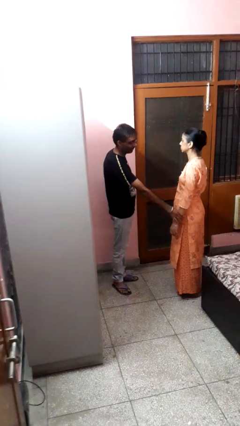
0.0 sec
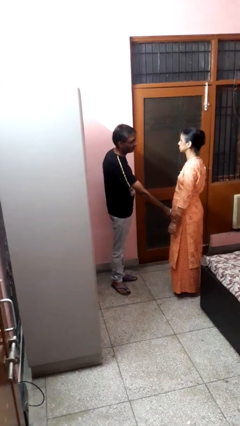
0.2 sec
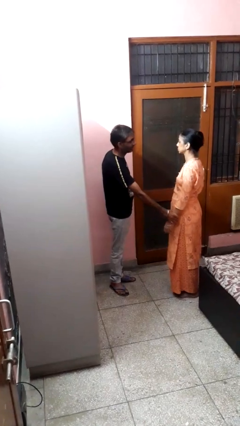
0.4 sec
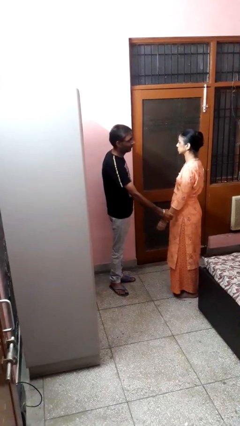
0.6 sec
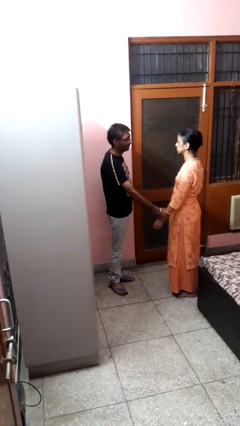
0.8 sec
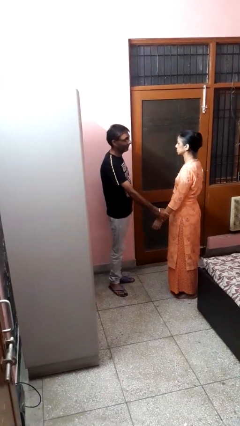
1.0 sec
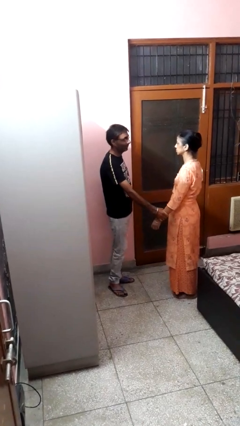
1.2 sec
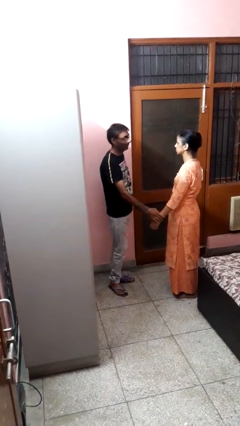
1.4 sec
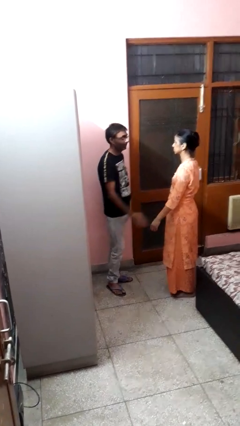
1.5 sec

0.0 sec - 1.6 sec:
person grabs person by forearm

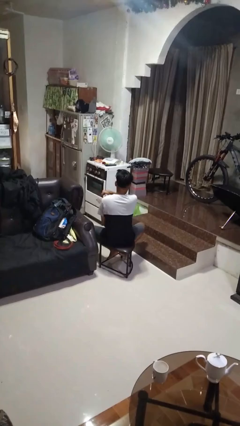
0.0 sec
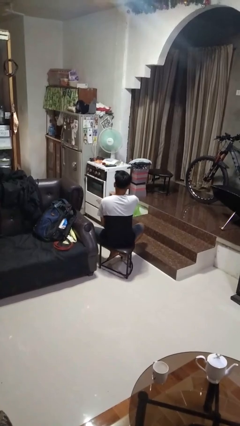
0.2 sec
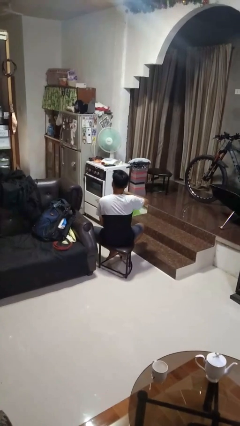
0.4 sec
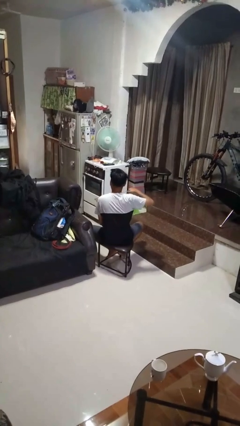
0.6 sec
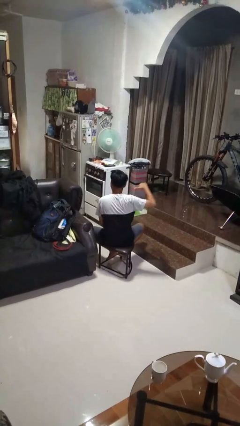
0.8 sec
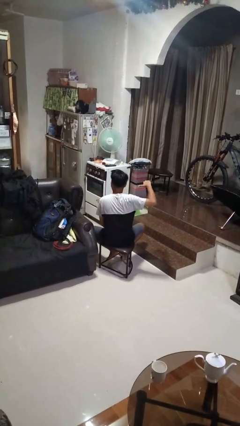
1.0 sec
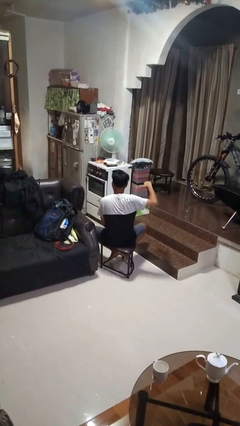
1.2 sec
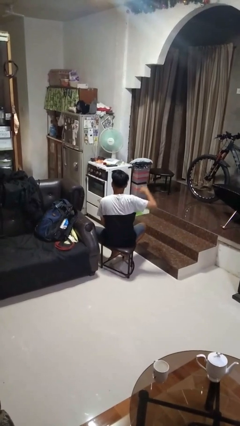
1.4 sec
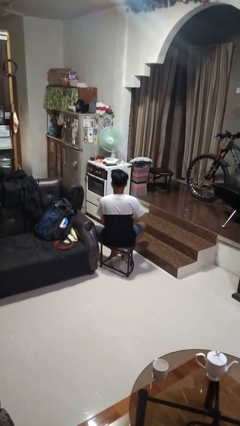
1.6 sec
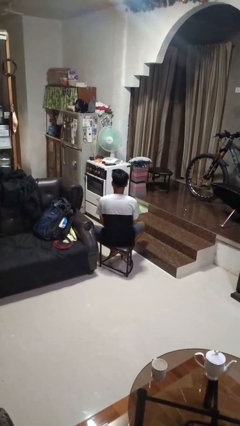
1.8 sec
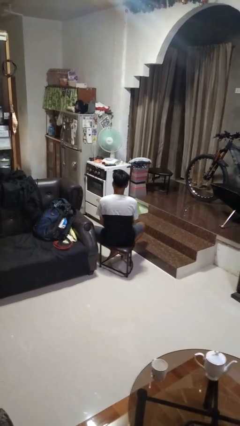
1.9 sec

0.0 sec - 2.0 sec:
person gestures cut

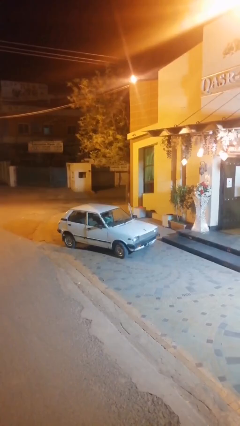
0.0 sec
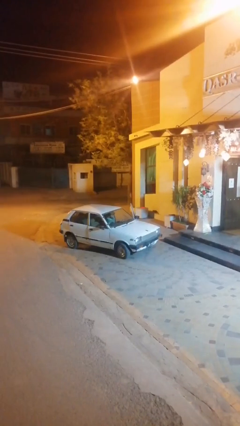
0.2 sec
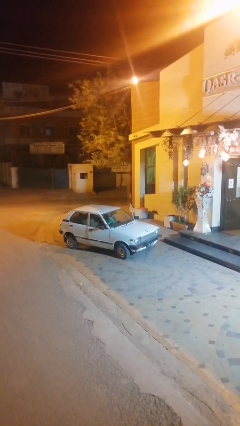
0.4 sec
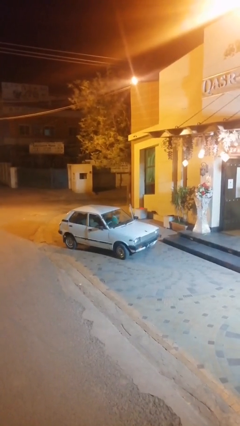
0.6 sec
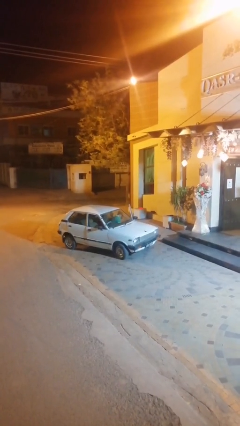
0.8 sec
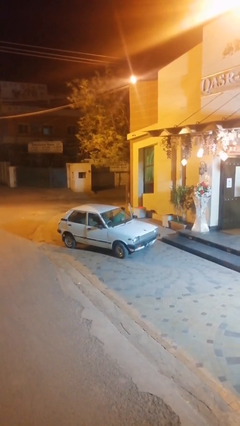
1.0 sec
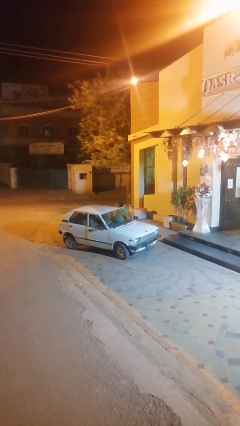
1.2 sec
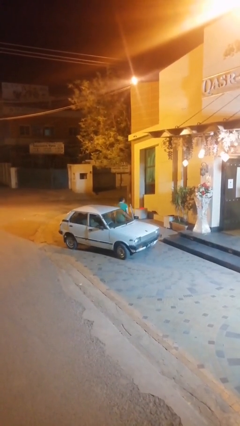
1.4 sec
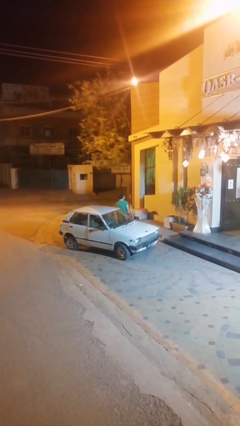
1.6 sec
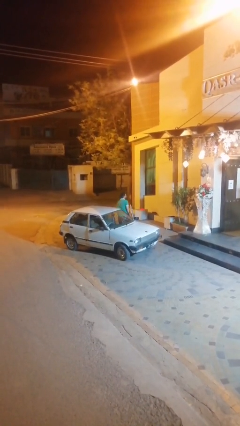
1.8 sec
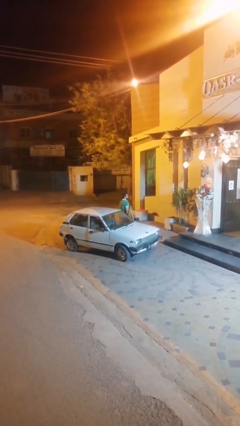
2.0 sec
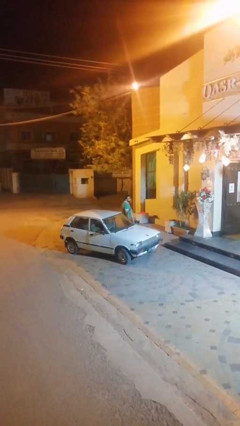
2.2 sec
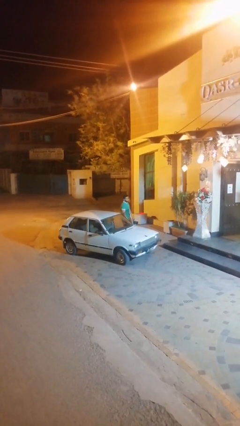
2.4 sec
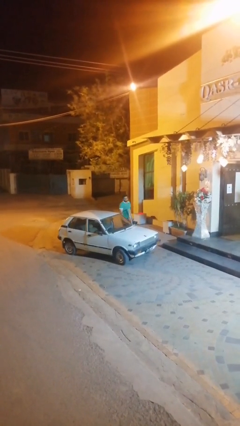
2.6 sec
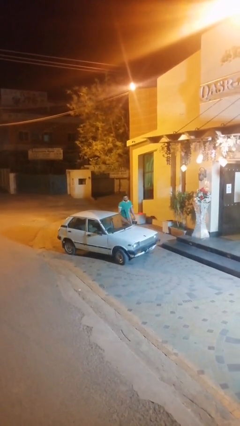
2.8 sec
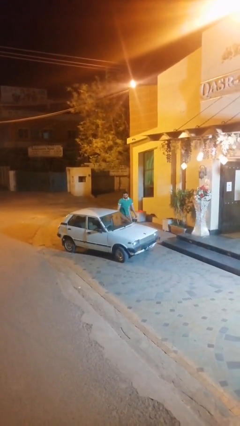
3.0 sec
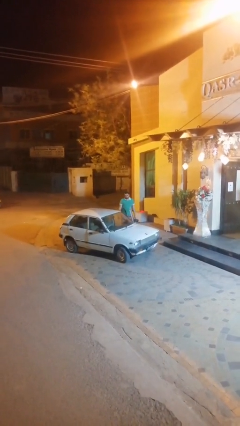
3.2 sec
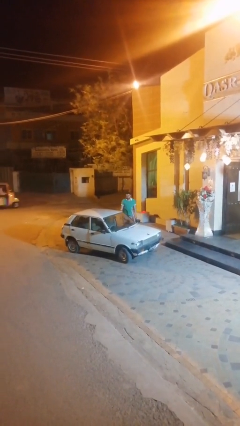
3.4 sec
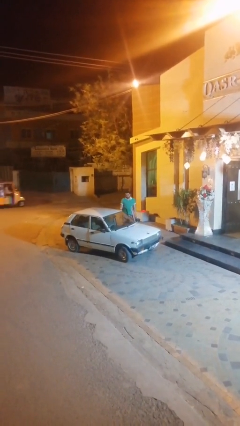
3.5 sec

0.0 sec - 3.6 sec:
person exits car

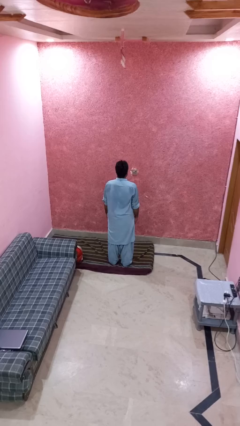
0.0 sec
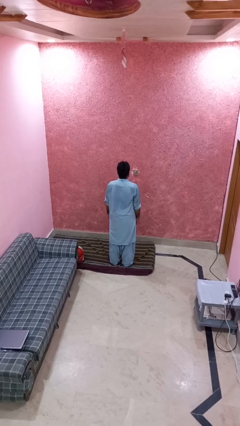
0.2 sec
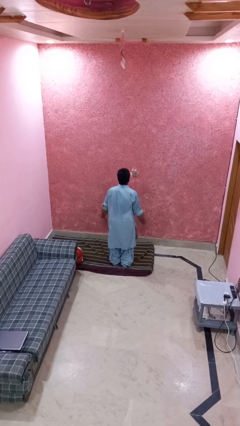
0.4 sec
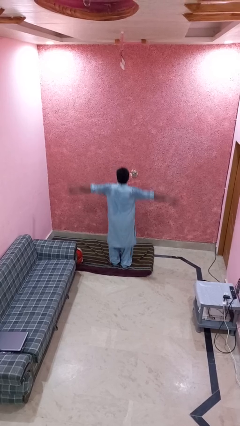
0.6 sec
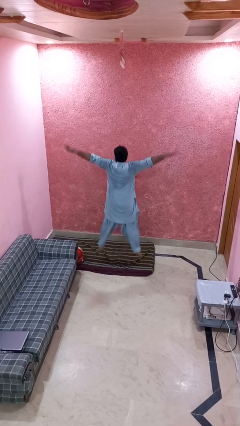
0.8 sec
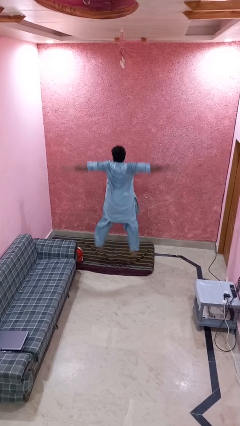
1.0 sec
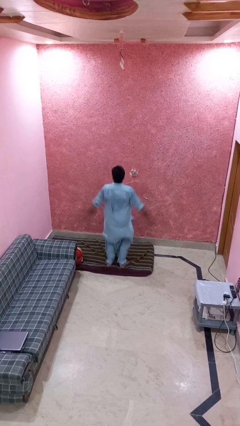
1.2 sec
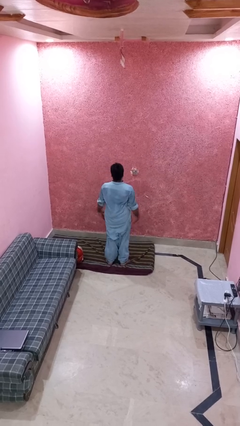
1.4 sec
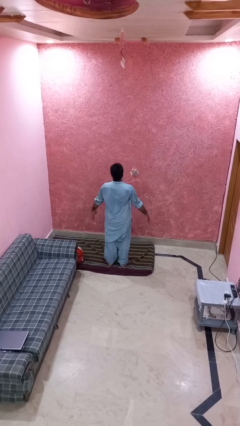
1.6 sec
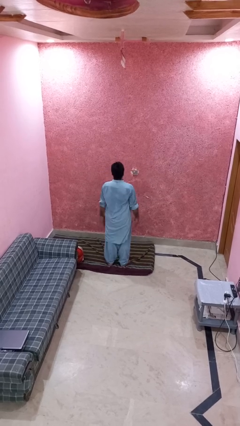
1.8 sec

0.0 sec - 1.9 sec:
person exercises with jumping jacks

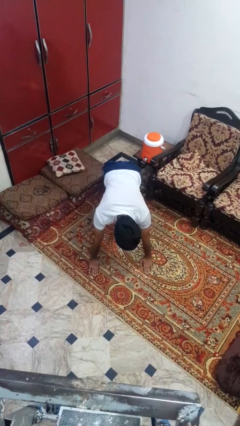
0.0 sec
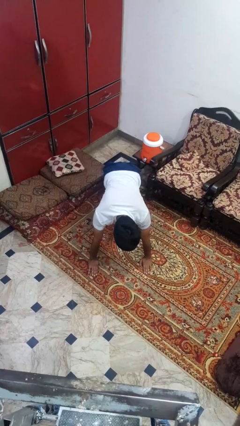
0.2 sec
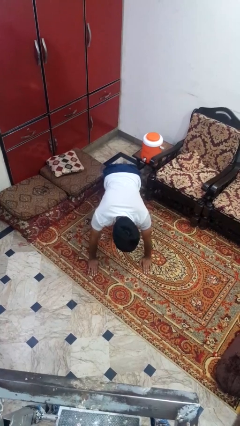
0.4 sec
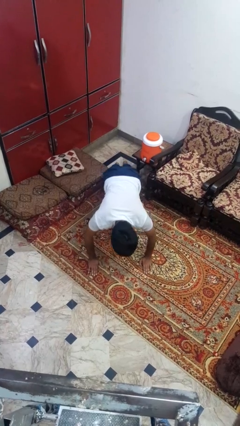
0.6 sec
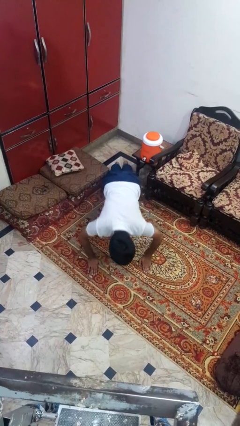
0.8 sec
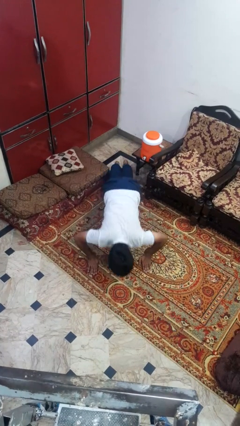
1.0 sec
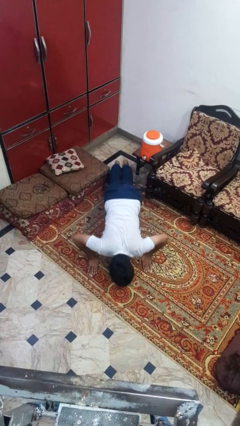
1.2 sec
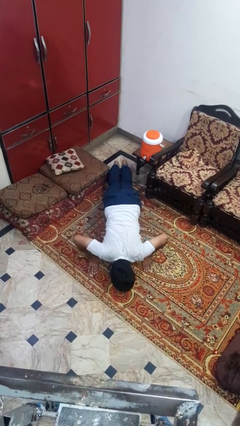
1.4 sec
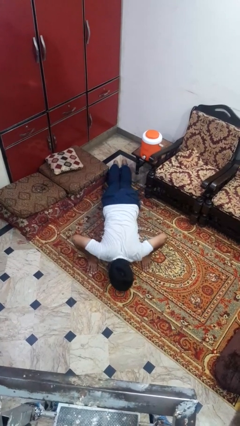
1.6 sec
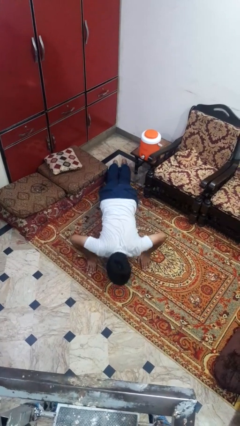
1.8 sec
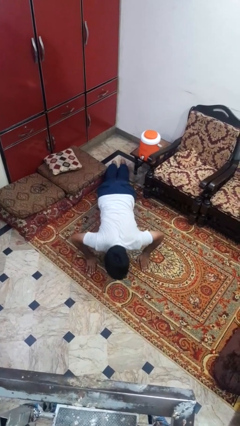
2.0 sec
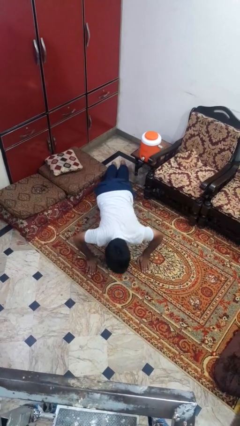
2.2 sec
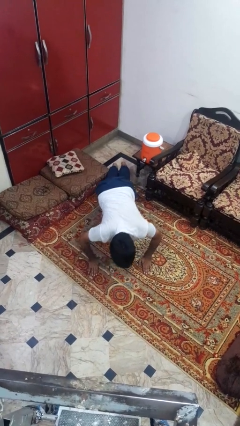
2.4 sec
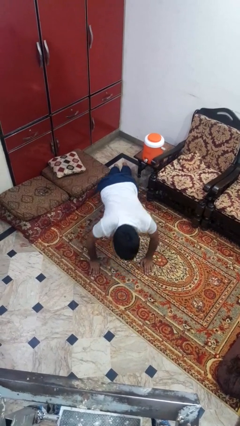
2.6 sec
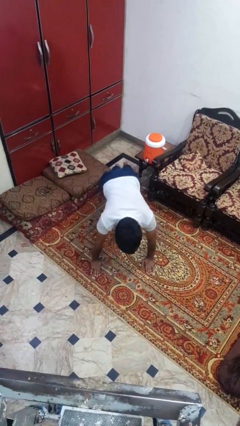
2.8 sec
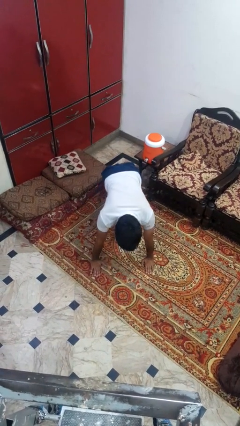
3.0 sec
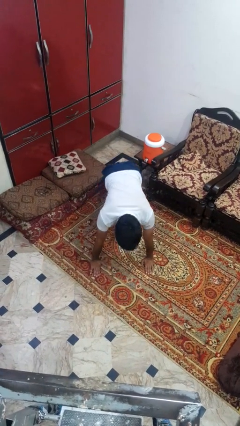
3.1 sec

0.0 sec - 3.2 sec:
person exercises with pushup

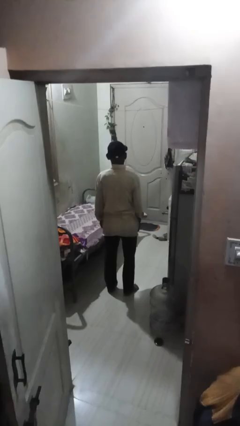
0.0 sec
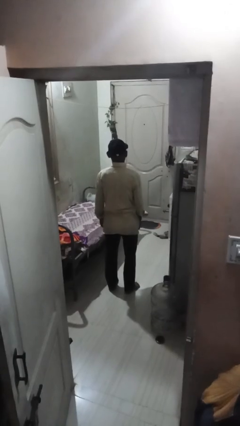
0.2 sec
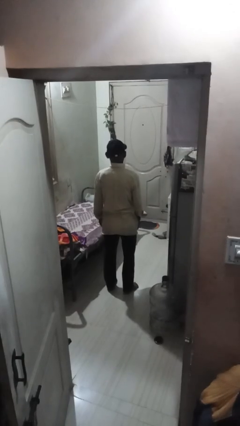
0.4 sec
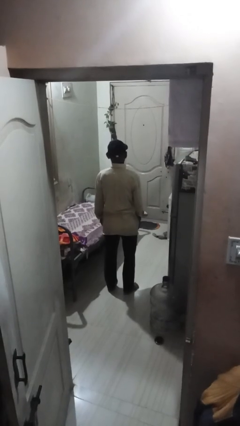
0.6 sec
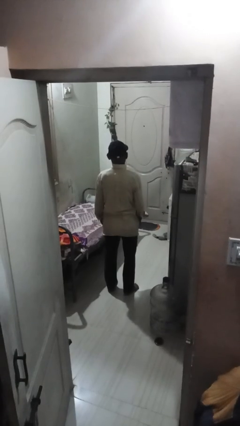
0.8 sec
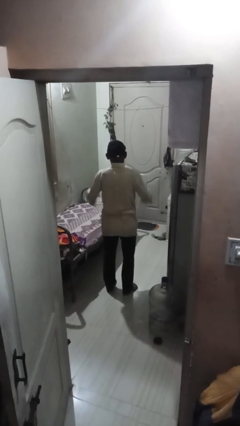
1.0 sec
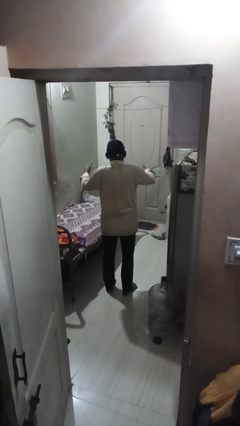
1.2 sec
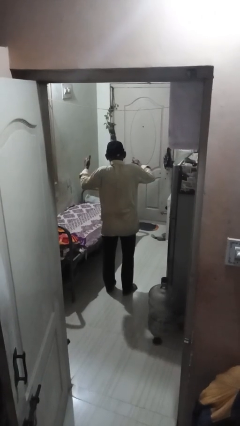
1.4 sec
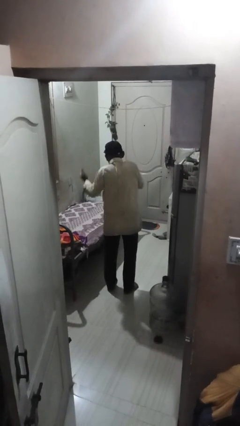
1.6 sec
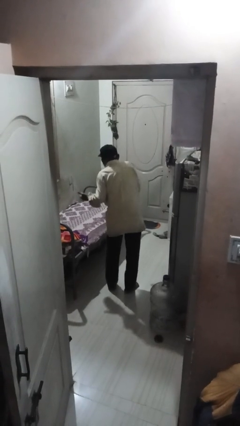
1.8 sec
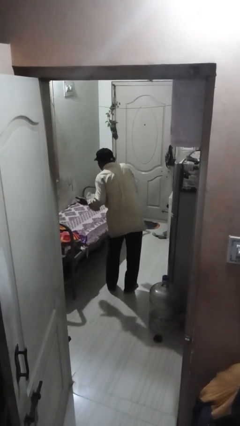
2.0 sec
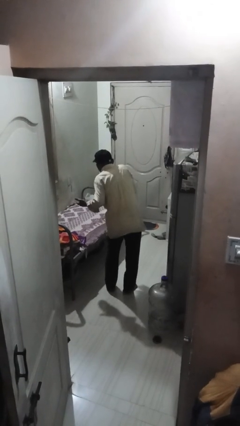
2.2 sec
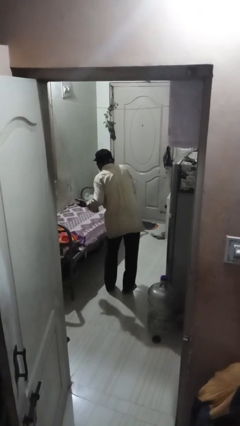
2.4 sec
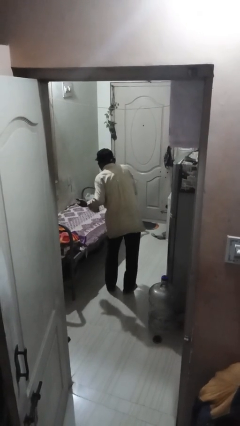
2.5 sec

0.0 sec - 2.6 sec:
person shrugs

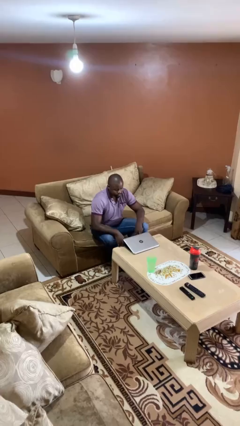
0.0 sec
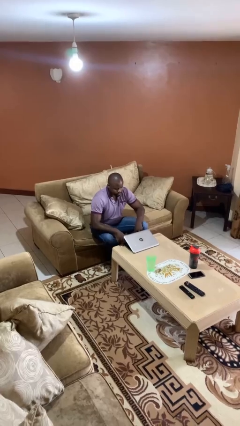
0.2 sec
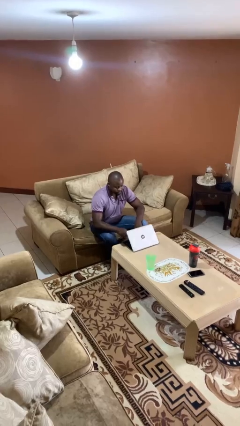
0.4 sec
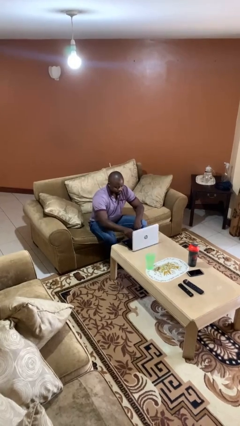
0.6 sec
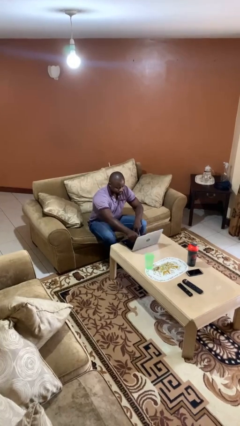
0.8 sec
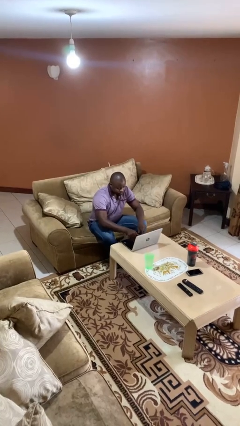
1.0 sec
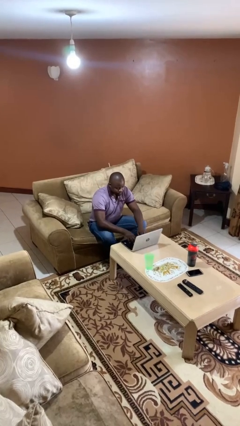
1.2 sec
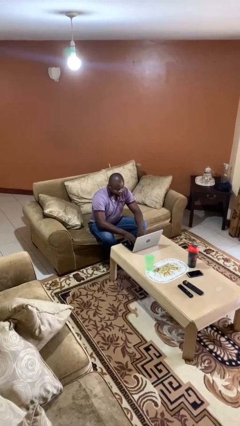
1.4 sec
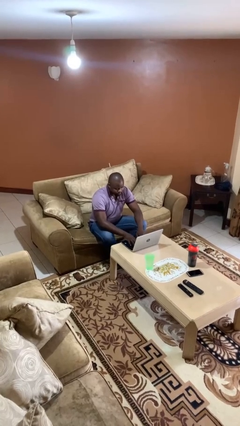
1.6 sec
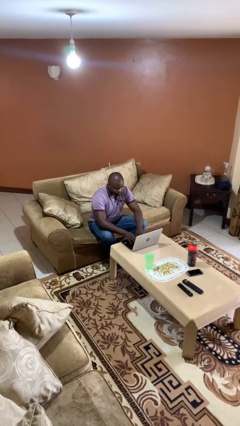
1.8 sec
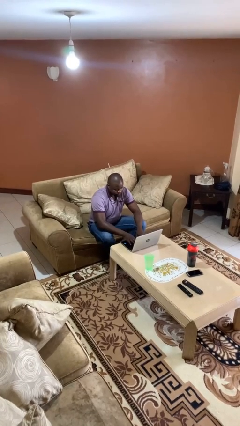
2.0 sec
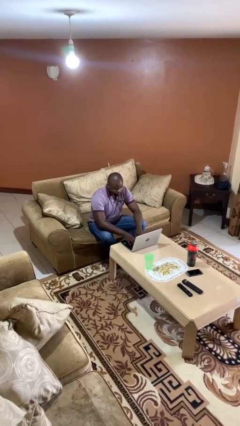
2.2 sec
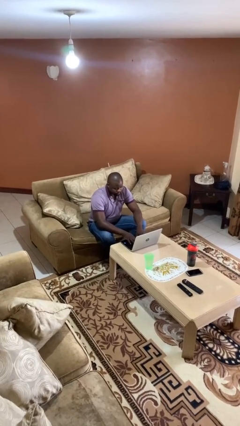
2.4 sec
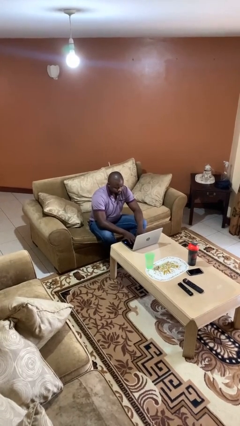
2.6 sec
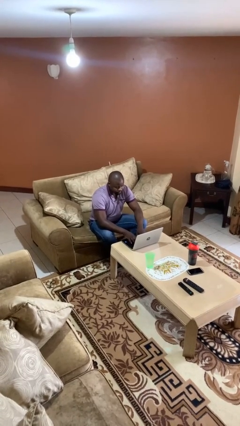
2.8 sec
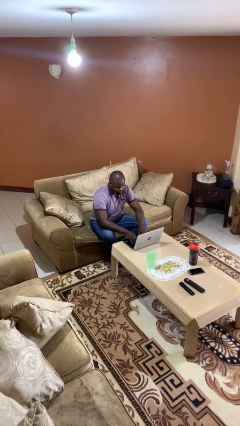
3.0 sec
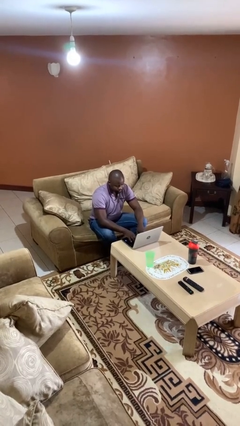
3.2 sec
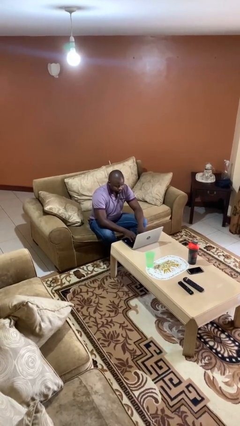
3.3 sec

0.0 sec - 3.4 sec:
person interacts with laptop
